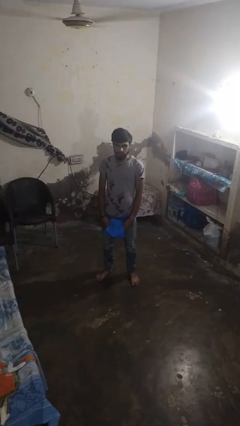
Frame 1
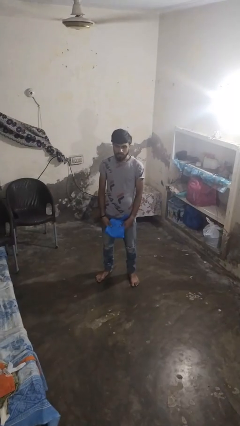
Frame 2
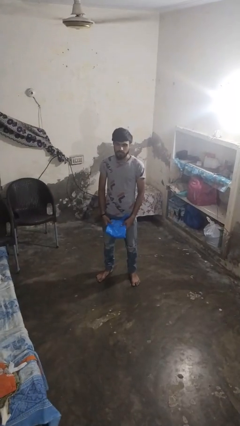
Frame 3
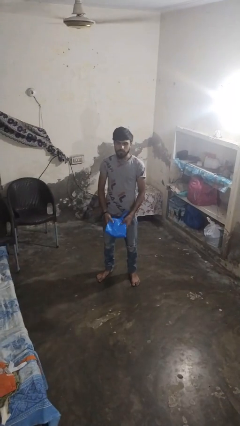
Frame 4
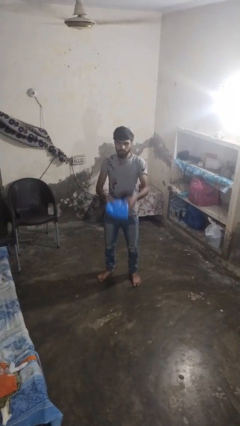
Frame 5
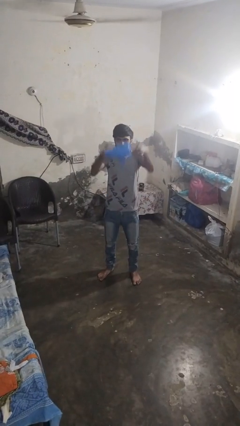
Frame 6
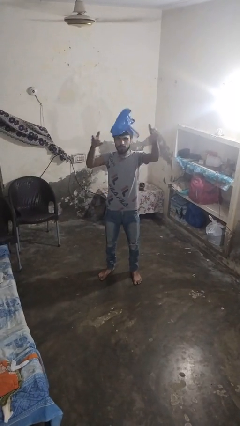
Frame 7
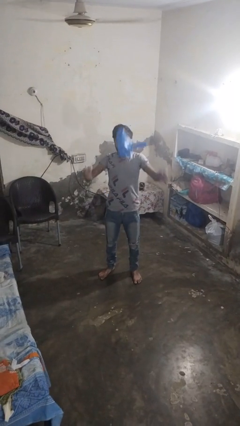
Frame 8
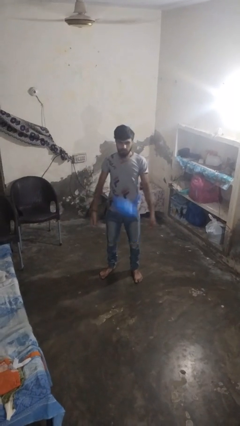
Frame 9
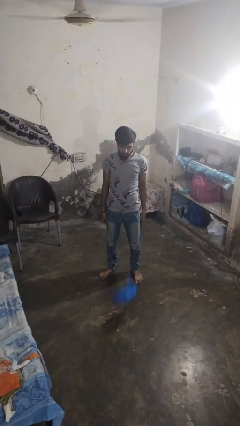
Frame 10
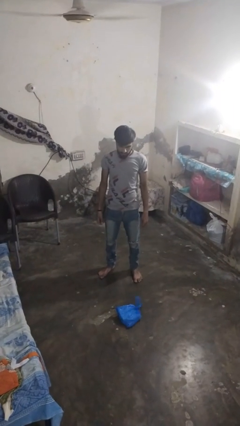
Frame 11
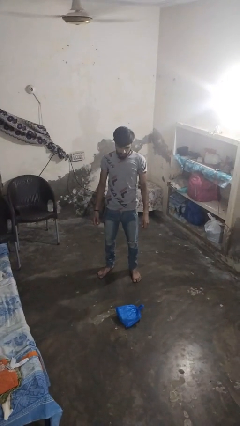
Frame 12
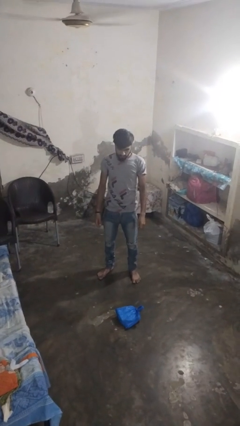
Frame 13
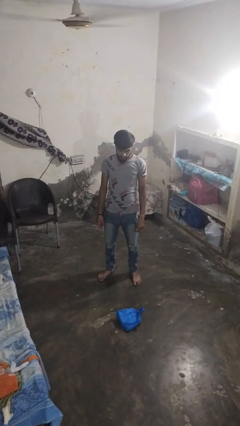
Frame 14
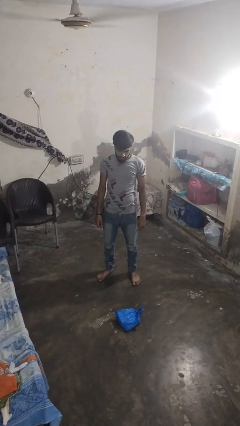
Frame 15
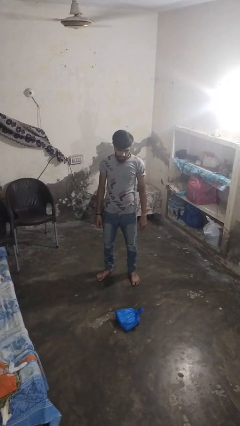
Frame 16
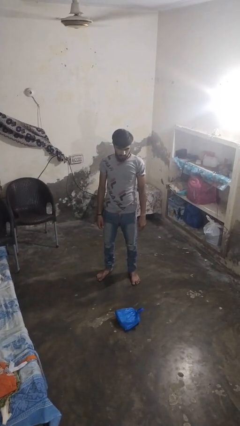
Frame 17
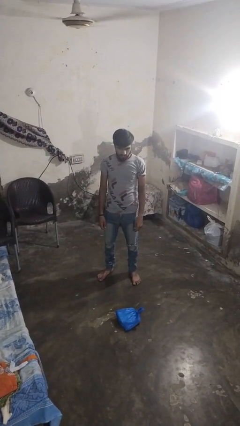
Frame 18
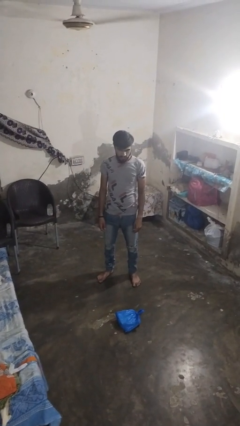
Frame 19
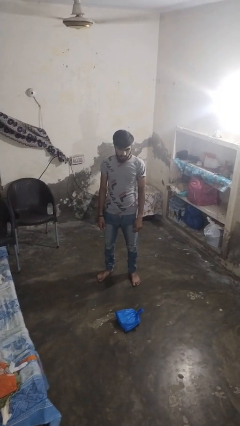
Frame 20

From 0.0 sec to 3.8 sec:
person throws object into air

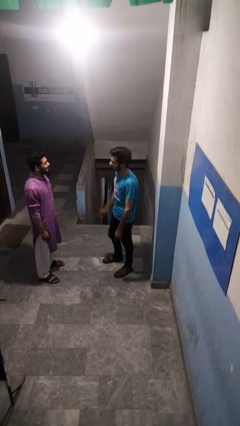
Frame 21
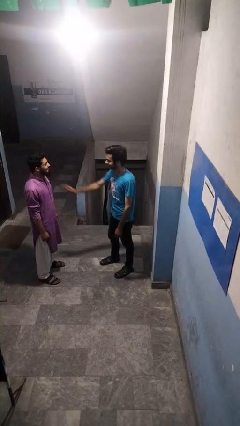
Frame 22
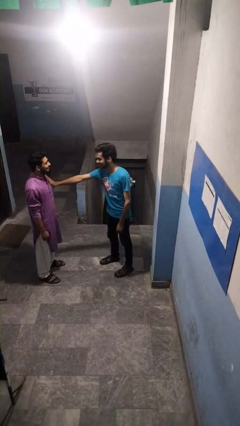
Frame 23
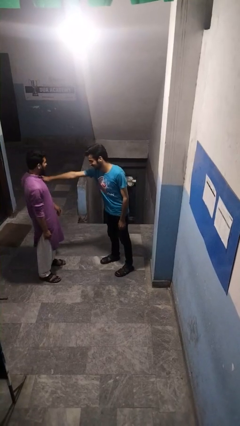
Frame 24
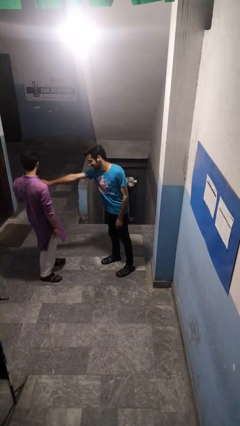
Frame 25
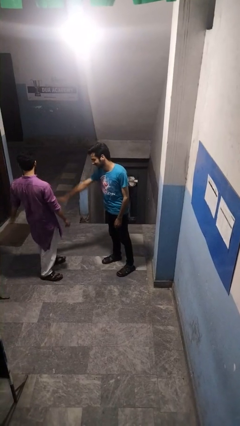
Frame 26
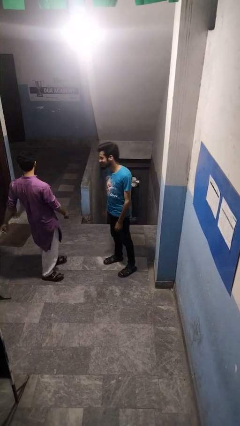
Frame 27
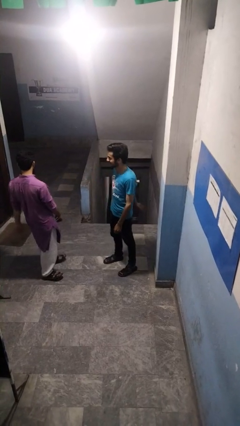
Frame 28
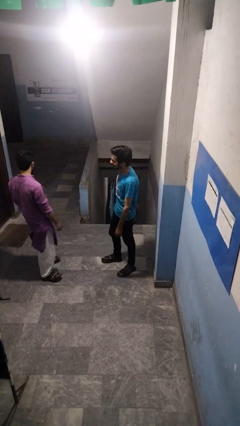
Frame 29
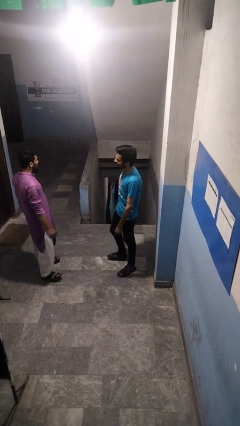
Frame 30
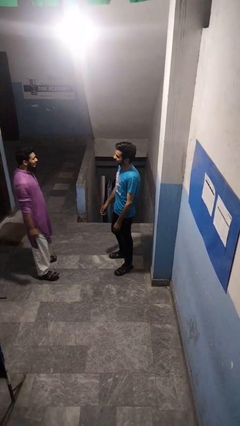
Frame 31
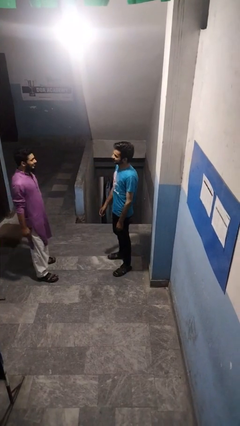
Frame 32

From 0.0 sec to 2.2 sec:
person shoves person

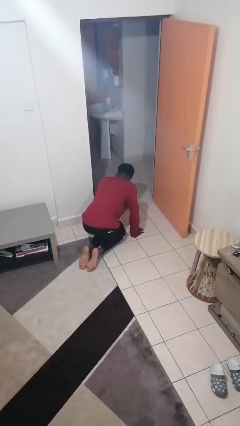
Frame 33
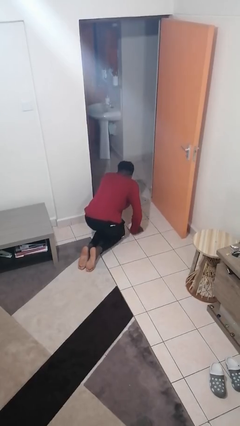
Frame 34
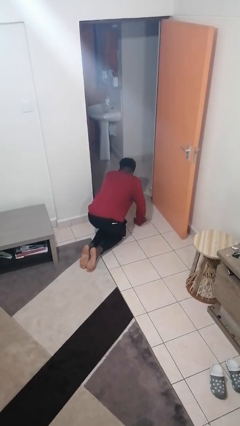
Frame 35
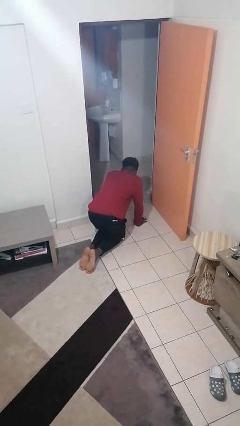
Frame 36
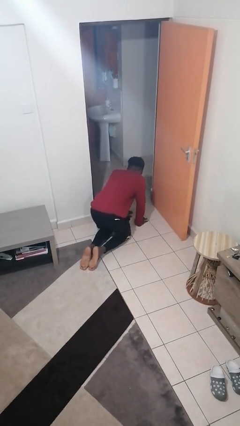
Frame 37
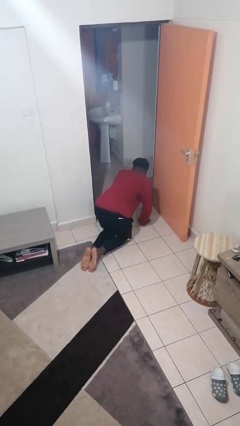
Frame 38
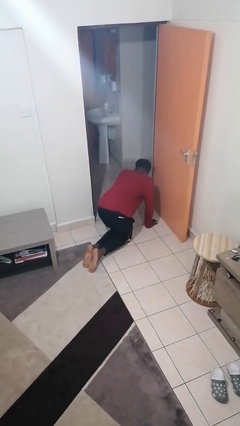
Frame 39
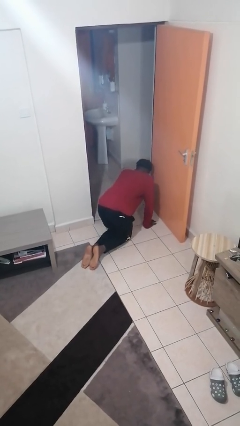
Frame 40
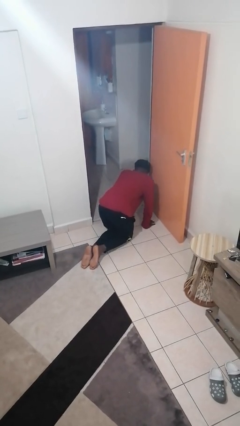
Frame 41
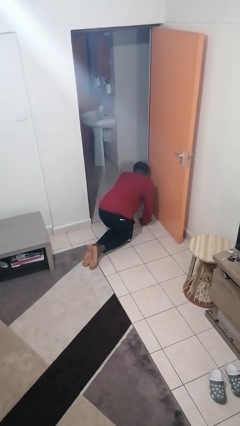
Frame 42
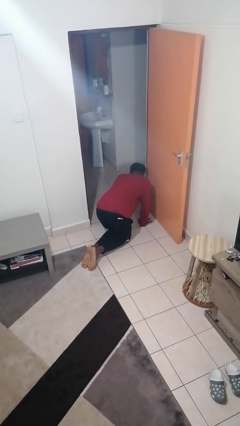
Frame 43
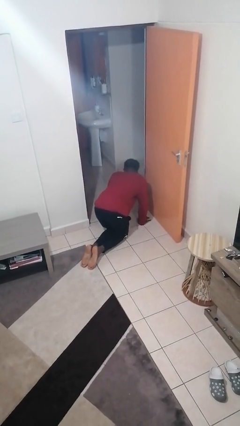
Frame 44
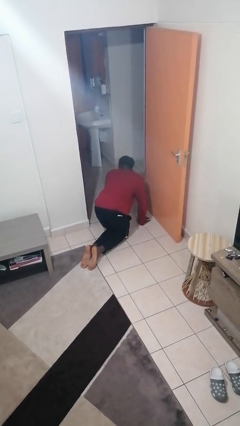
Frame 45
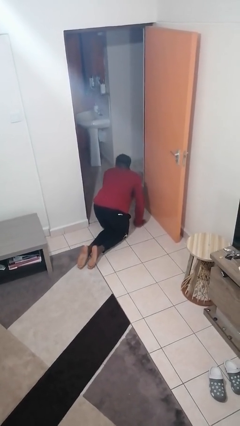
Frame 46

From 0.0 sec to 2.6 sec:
person crawls

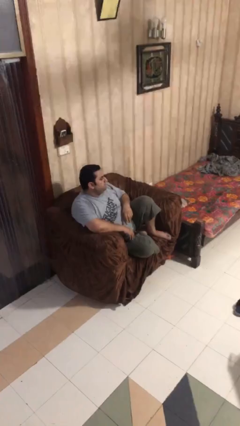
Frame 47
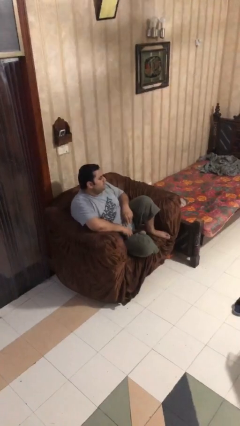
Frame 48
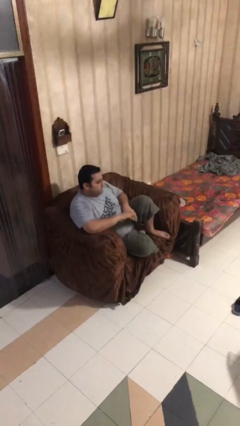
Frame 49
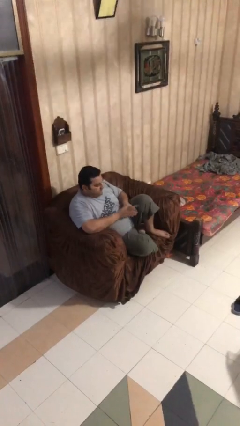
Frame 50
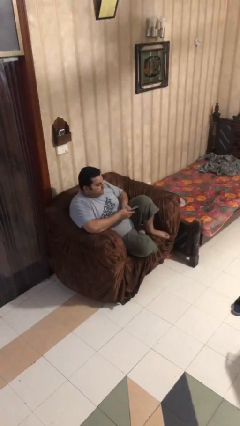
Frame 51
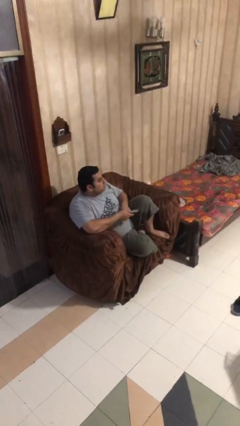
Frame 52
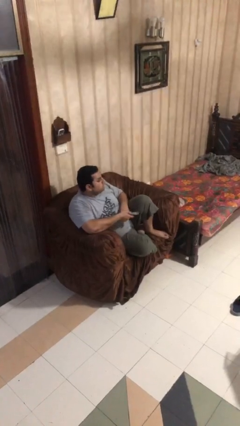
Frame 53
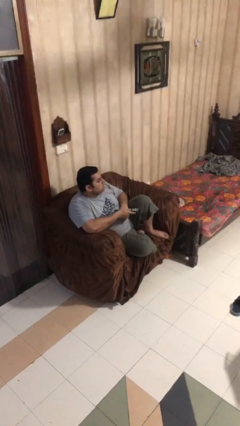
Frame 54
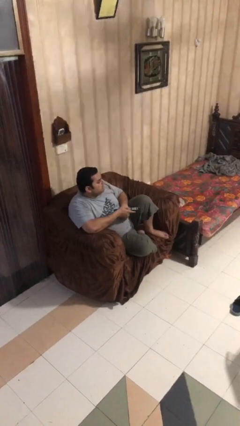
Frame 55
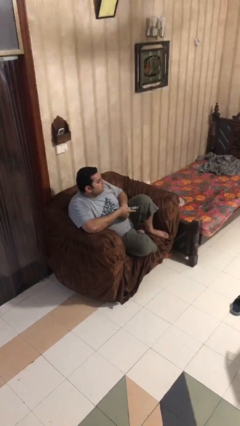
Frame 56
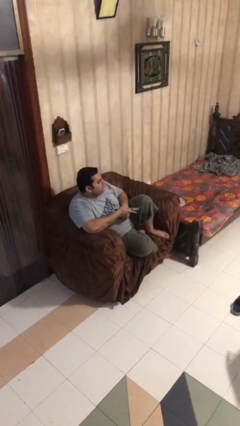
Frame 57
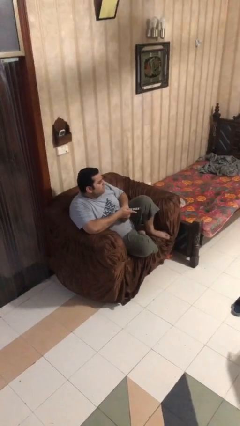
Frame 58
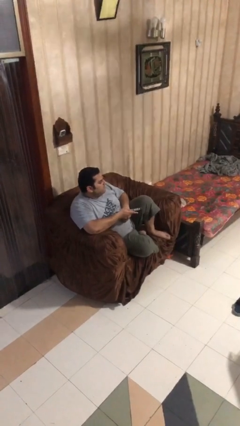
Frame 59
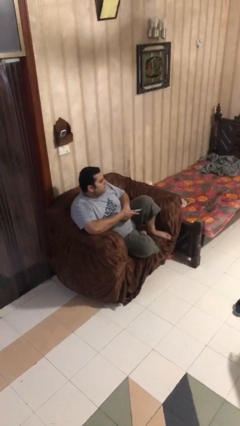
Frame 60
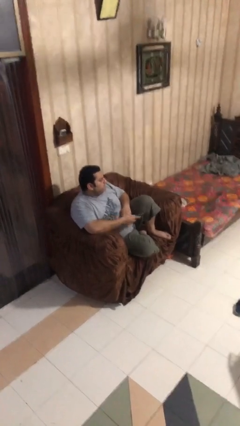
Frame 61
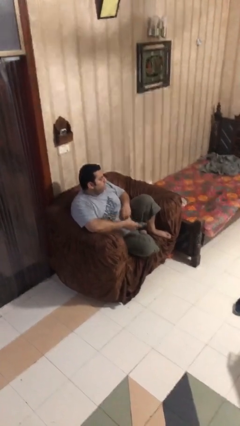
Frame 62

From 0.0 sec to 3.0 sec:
person uses television remote

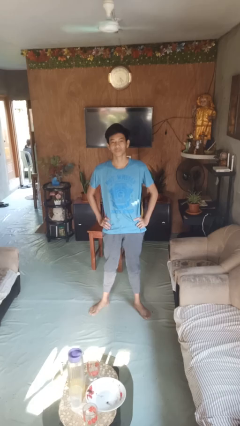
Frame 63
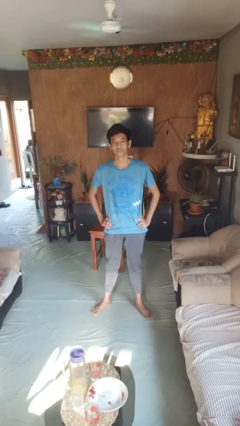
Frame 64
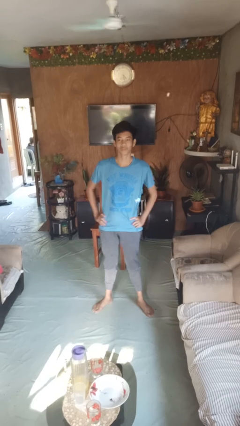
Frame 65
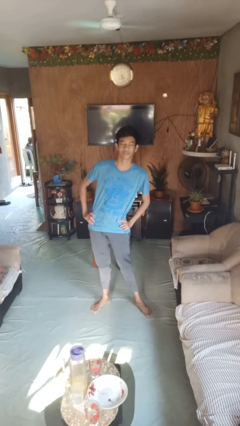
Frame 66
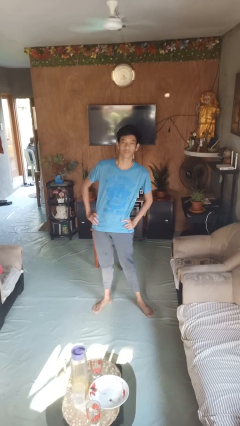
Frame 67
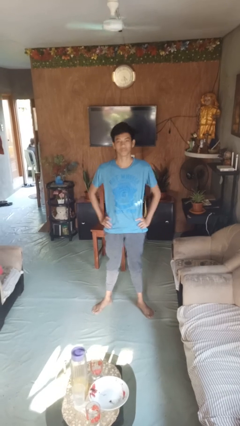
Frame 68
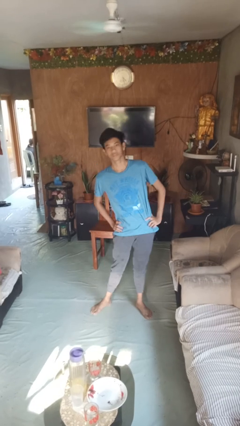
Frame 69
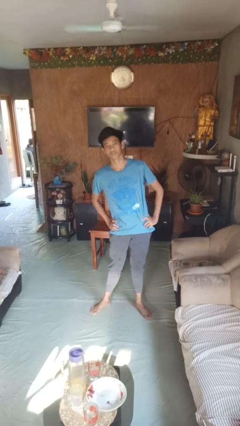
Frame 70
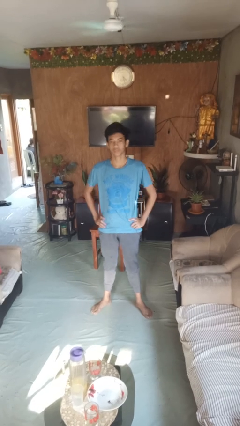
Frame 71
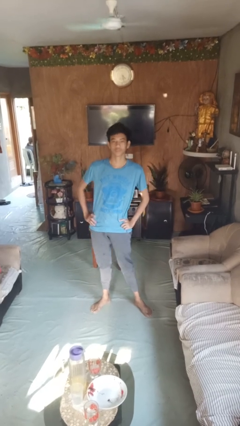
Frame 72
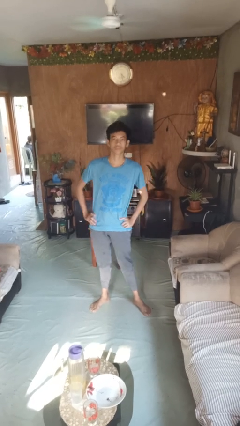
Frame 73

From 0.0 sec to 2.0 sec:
person wiggles hips

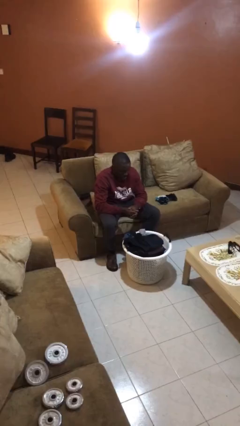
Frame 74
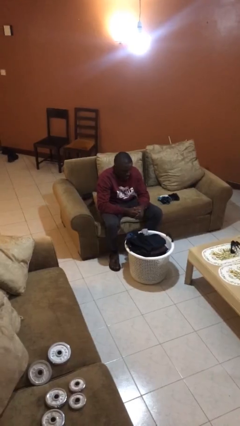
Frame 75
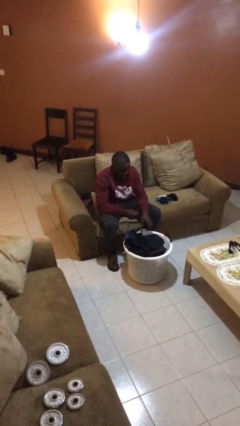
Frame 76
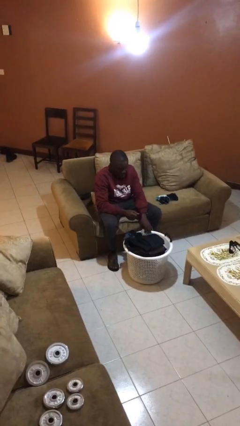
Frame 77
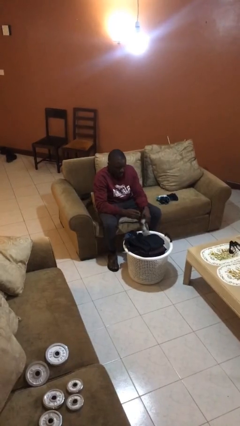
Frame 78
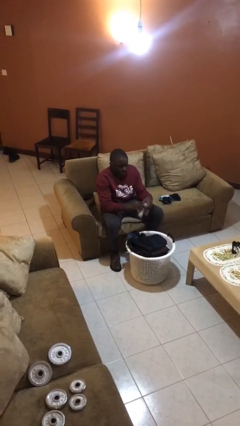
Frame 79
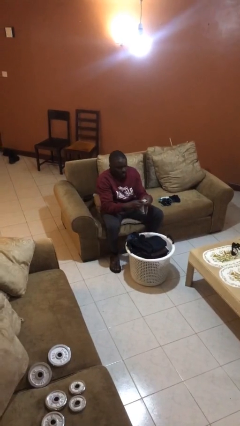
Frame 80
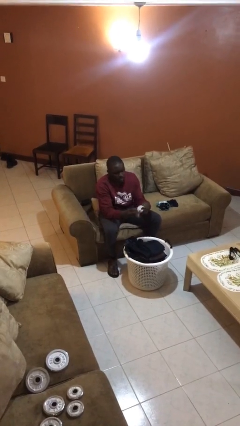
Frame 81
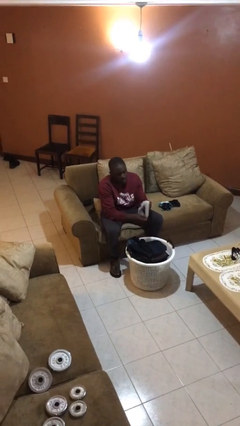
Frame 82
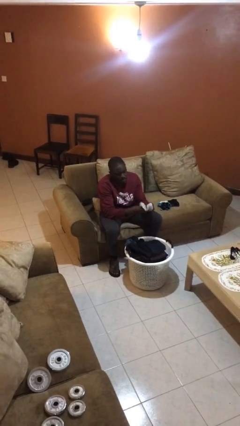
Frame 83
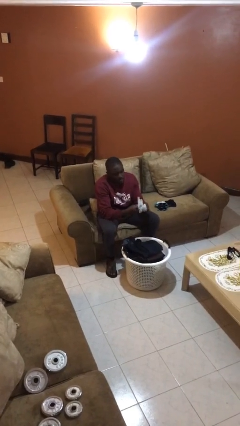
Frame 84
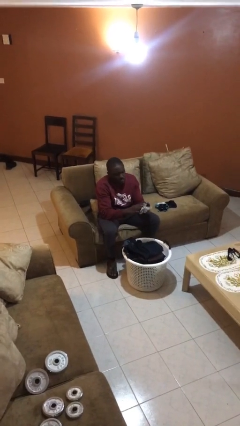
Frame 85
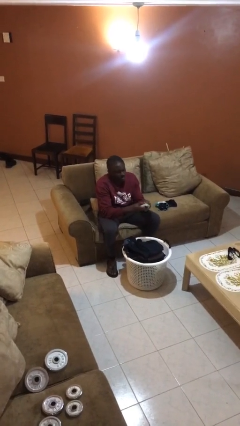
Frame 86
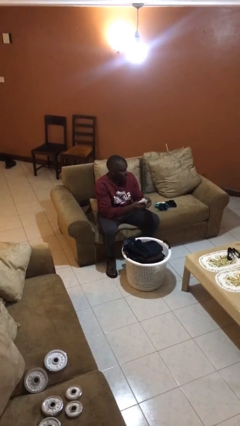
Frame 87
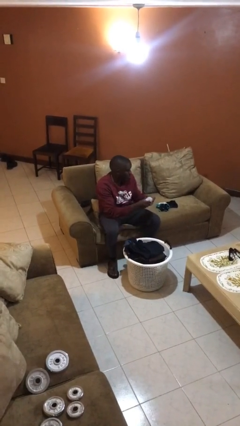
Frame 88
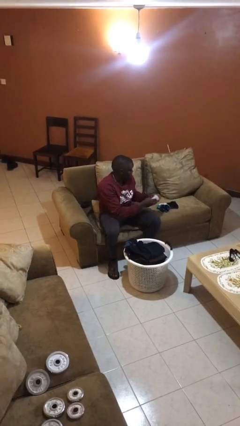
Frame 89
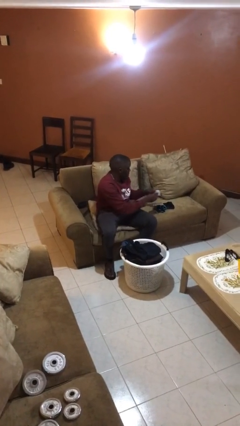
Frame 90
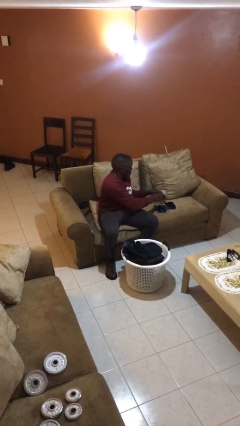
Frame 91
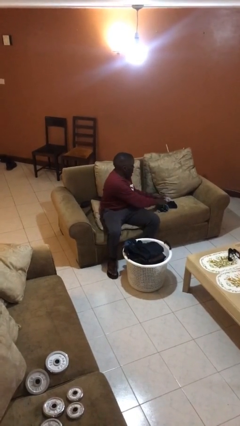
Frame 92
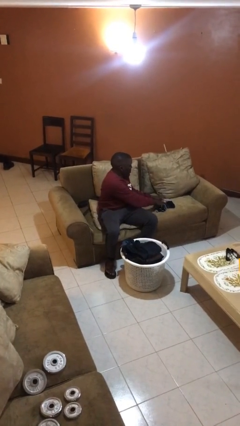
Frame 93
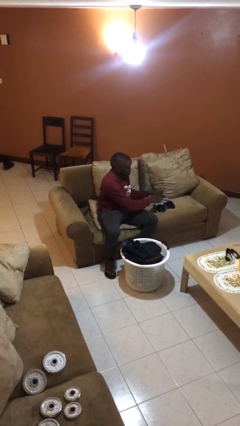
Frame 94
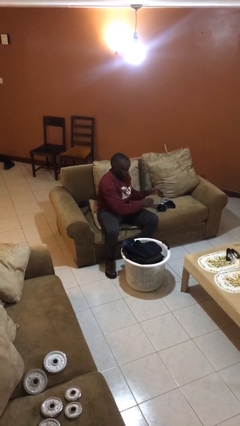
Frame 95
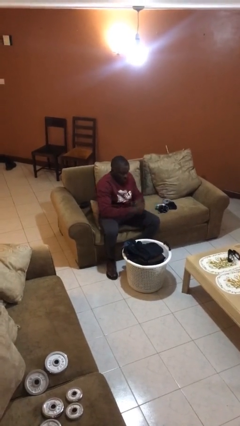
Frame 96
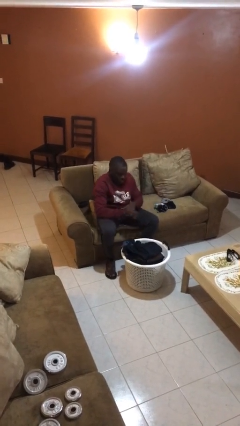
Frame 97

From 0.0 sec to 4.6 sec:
person folds socks
